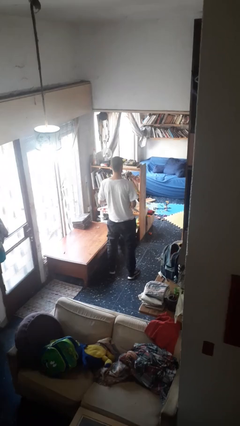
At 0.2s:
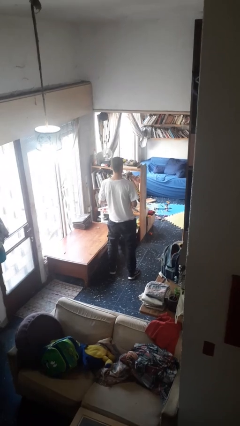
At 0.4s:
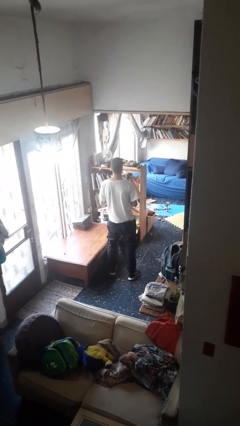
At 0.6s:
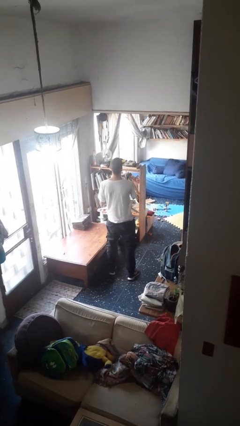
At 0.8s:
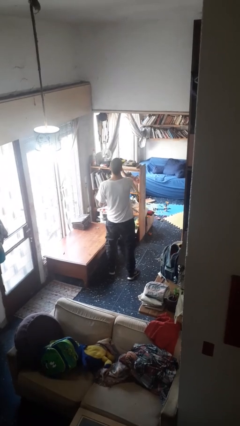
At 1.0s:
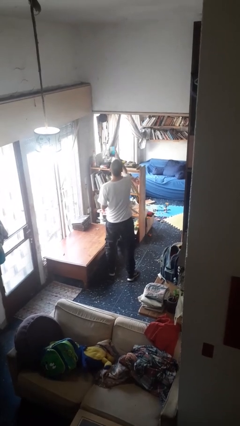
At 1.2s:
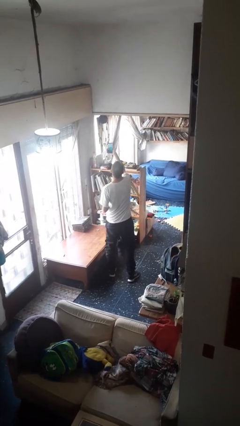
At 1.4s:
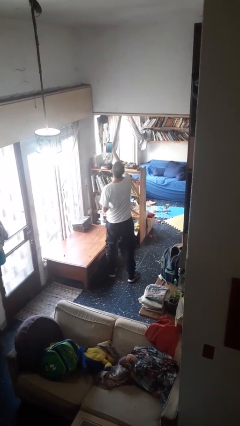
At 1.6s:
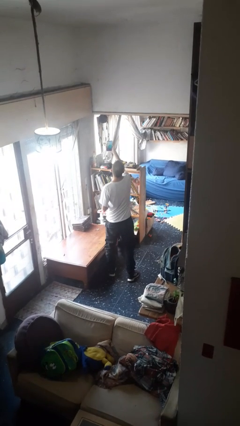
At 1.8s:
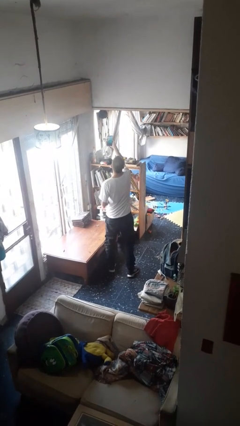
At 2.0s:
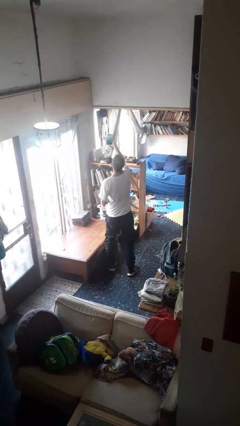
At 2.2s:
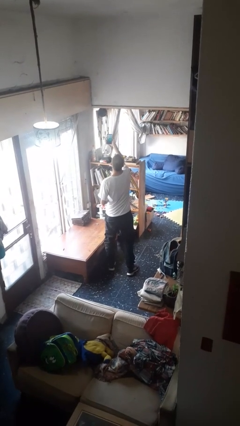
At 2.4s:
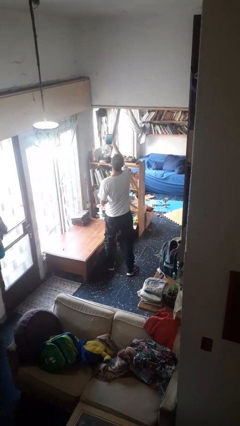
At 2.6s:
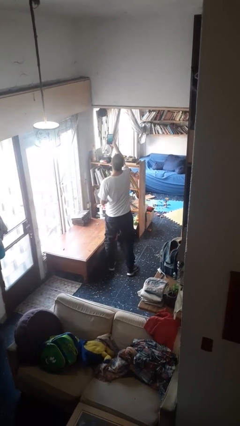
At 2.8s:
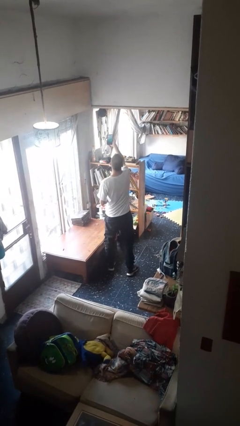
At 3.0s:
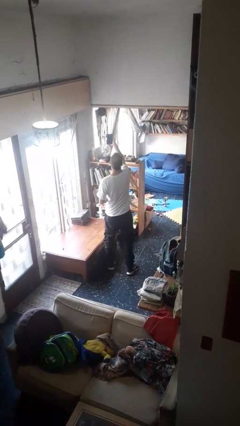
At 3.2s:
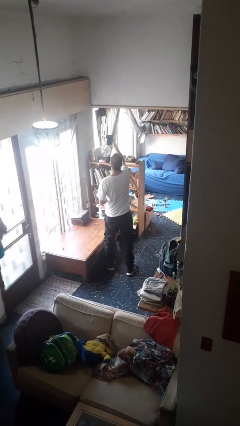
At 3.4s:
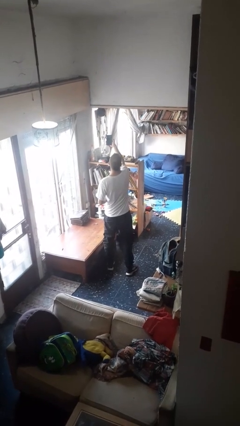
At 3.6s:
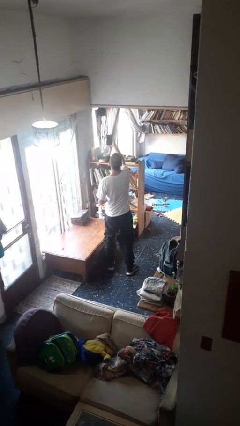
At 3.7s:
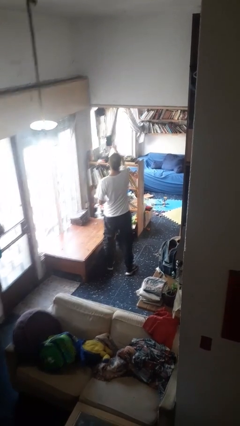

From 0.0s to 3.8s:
person takes selfie

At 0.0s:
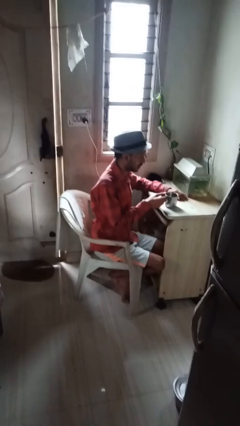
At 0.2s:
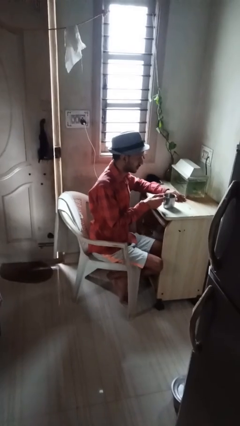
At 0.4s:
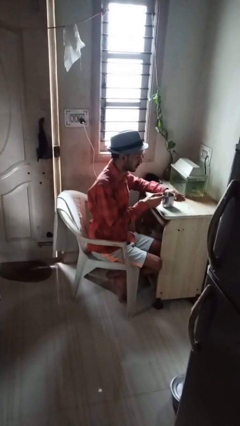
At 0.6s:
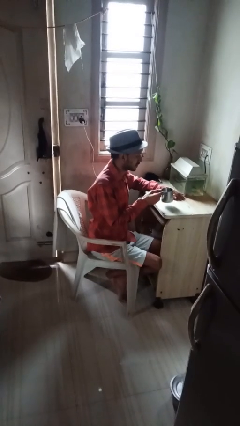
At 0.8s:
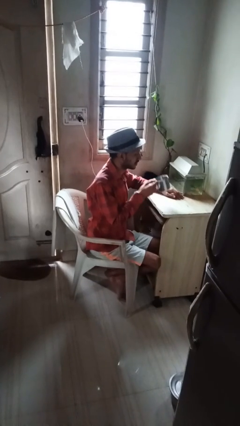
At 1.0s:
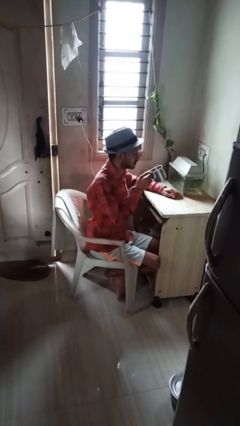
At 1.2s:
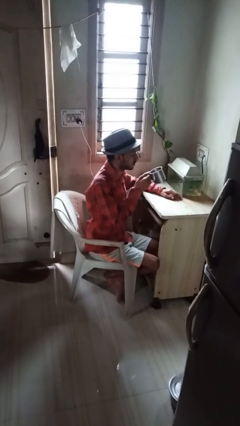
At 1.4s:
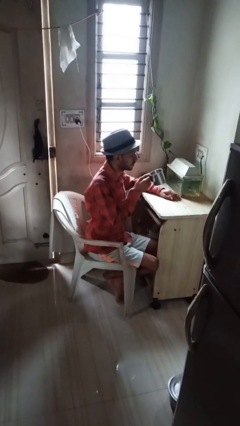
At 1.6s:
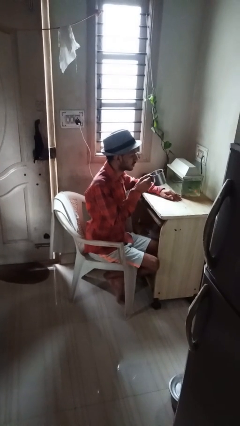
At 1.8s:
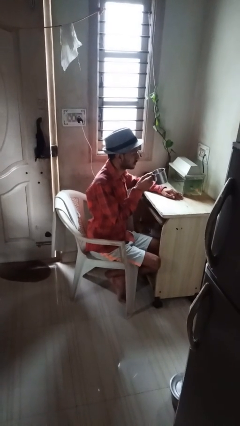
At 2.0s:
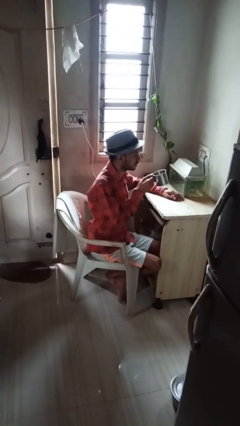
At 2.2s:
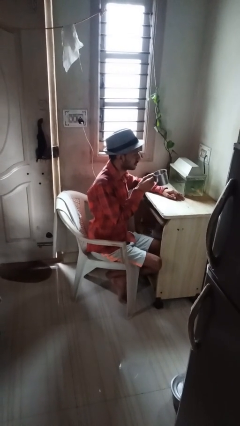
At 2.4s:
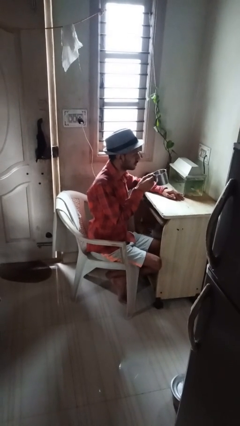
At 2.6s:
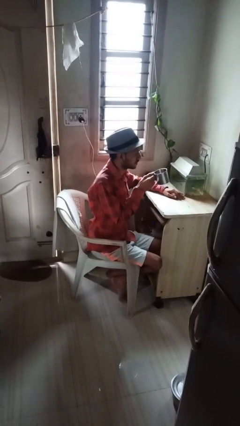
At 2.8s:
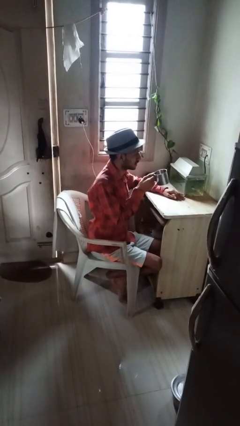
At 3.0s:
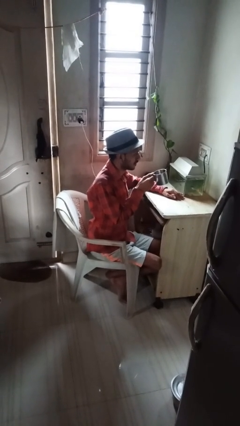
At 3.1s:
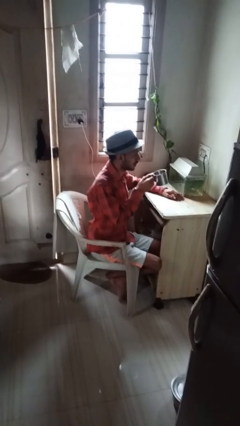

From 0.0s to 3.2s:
person picks up object from table

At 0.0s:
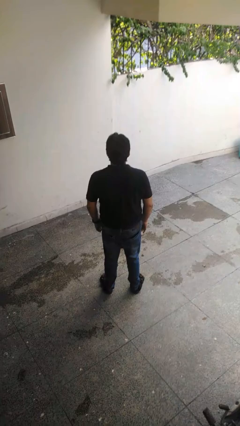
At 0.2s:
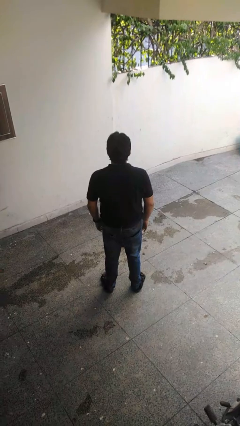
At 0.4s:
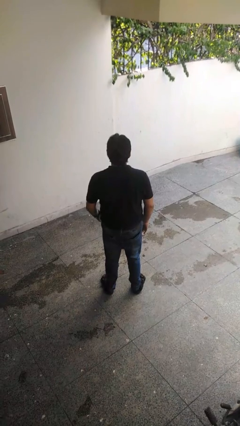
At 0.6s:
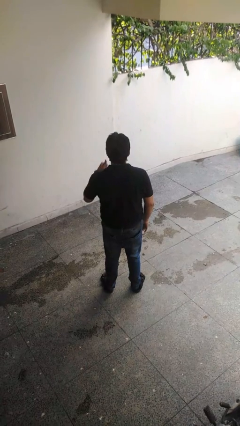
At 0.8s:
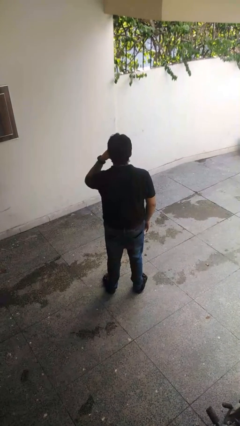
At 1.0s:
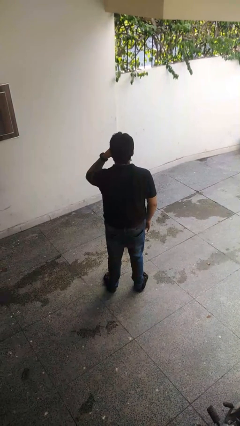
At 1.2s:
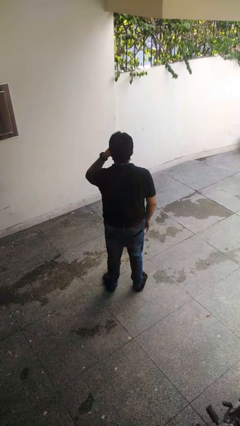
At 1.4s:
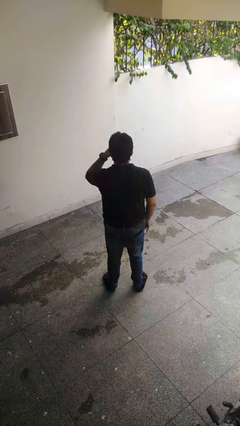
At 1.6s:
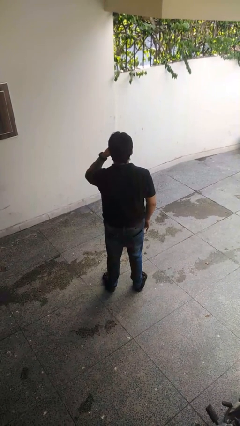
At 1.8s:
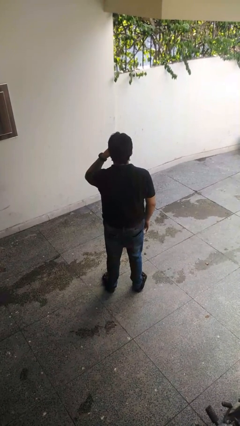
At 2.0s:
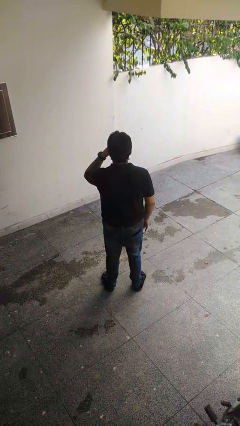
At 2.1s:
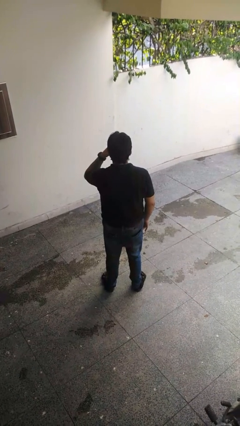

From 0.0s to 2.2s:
person gestures call me

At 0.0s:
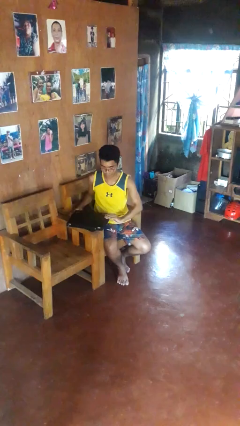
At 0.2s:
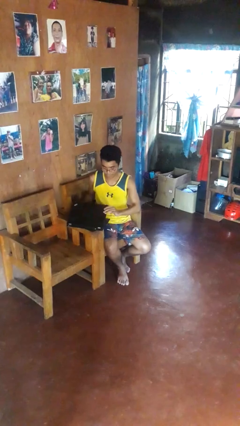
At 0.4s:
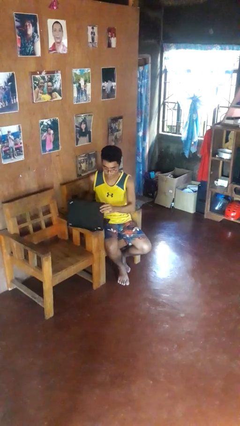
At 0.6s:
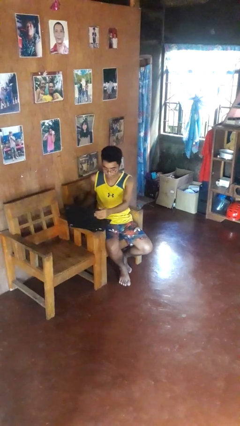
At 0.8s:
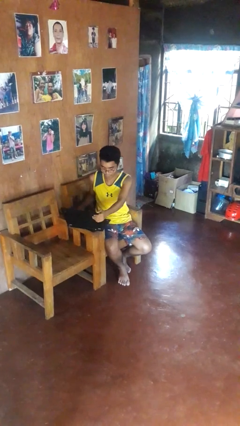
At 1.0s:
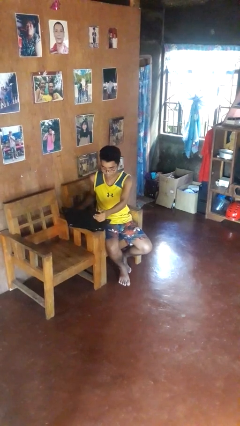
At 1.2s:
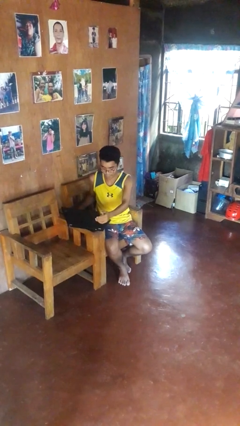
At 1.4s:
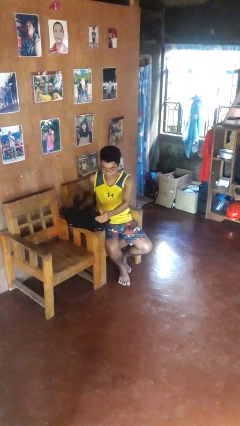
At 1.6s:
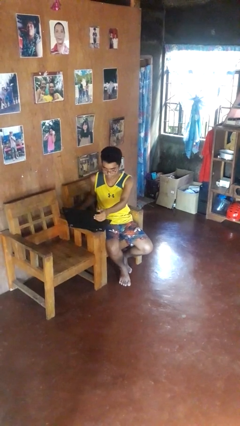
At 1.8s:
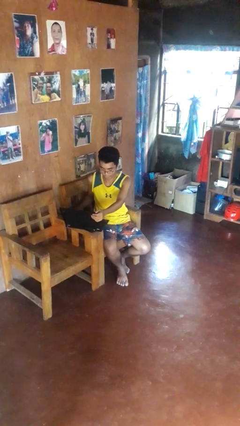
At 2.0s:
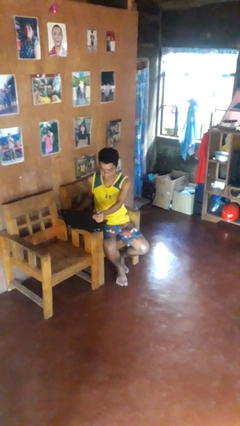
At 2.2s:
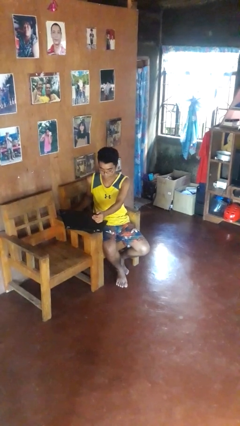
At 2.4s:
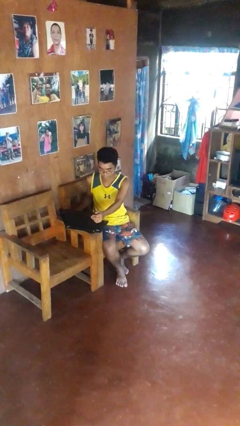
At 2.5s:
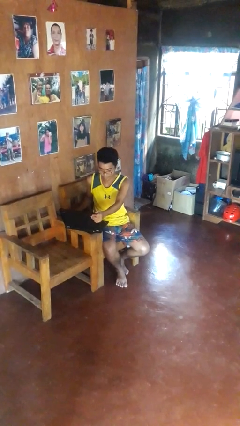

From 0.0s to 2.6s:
person opens laptop

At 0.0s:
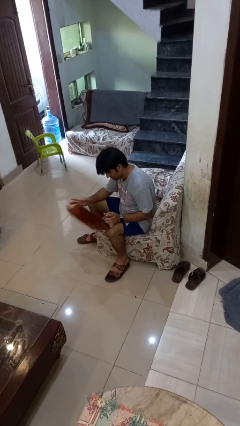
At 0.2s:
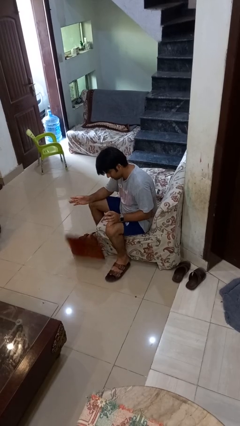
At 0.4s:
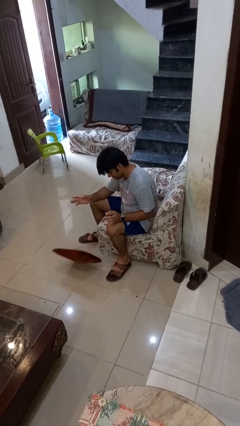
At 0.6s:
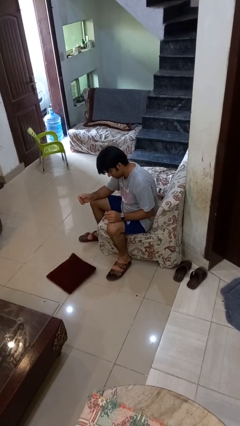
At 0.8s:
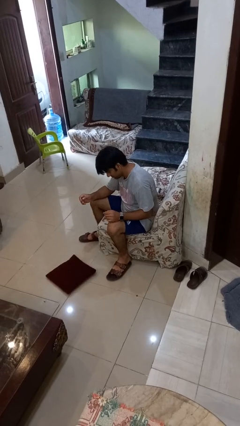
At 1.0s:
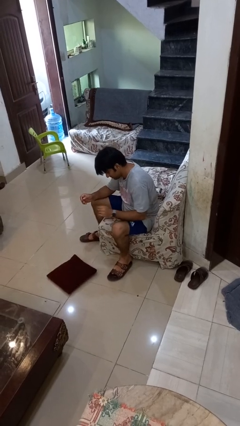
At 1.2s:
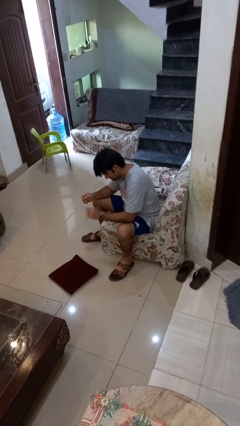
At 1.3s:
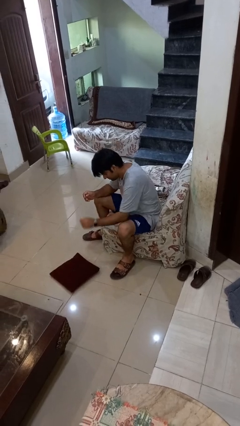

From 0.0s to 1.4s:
person drops object

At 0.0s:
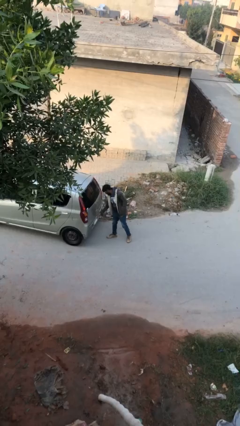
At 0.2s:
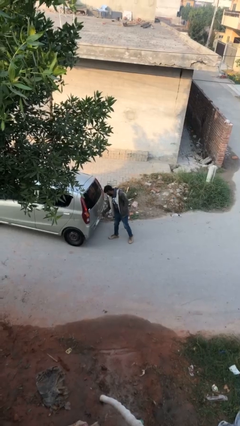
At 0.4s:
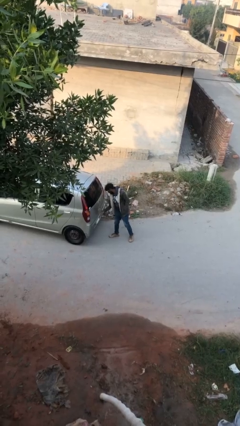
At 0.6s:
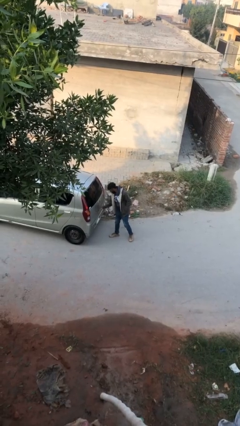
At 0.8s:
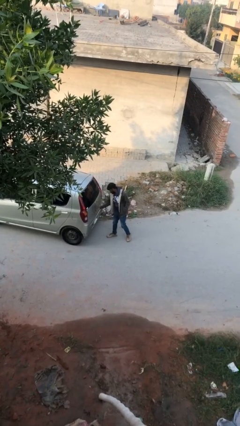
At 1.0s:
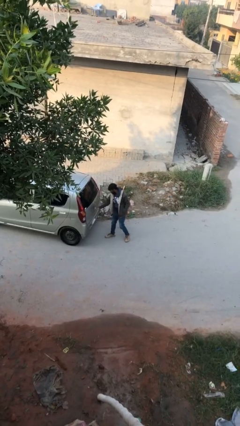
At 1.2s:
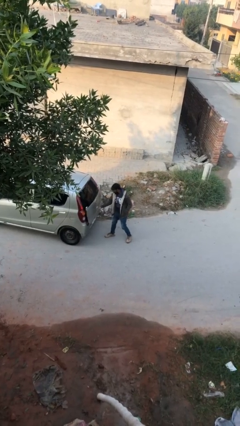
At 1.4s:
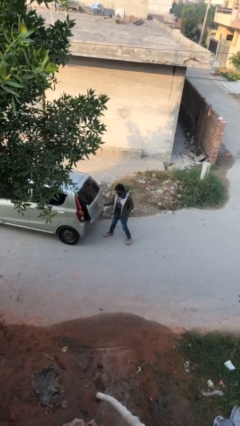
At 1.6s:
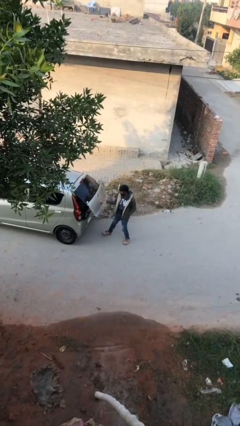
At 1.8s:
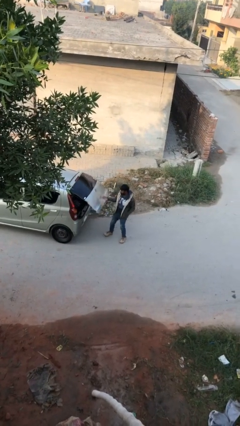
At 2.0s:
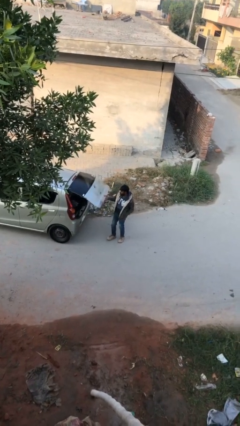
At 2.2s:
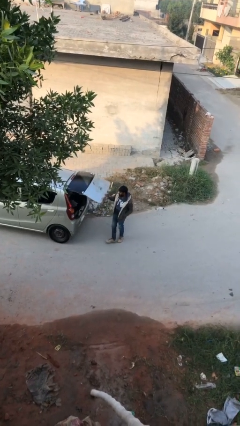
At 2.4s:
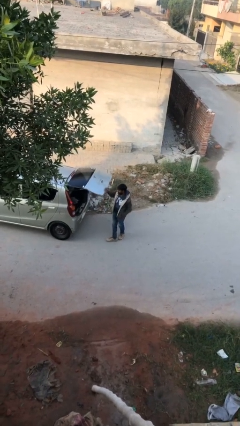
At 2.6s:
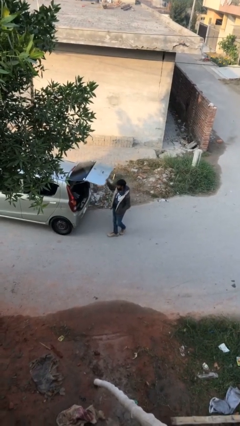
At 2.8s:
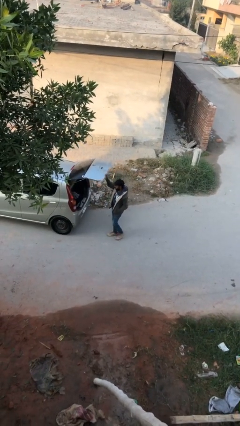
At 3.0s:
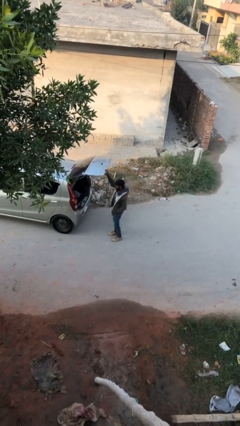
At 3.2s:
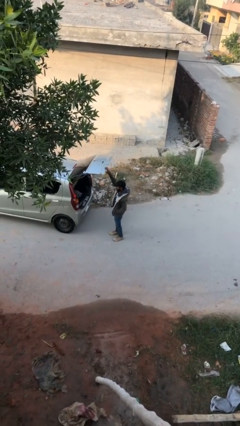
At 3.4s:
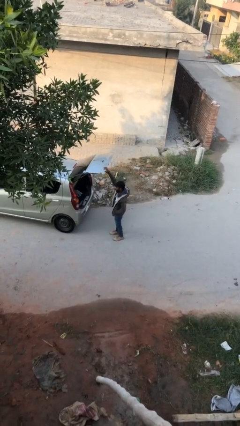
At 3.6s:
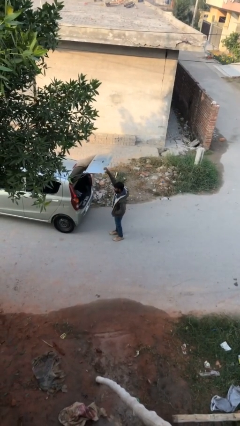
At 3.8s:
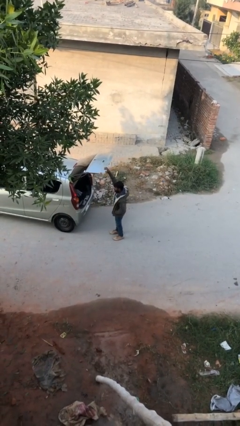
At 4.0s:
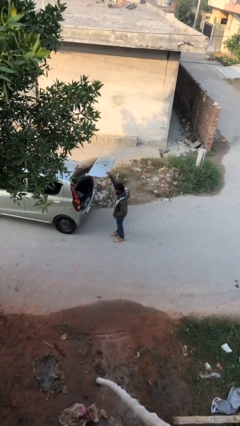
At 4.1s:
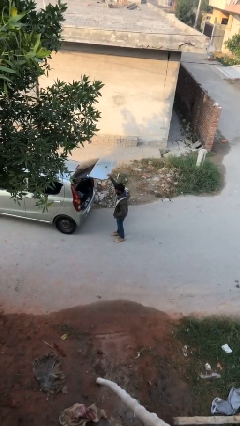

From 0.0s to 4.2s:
person opens car trunk
